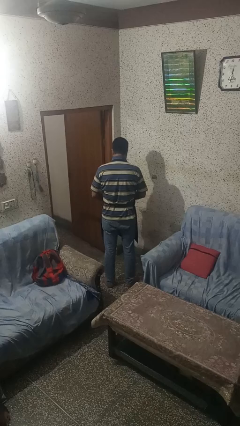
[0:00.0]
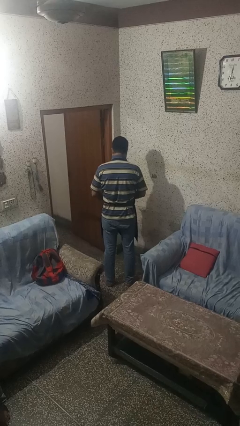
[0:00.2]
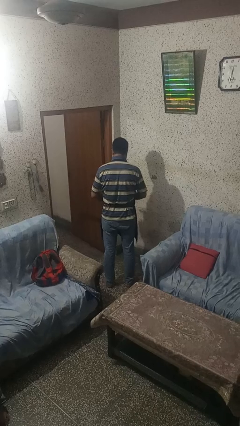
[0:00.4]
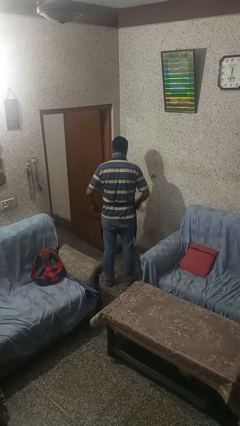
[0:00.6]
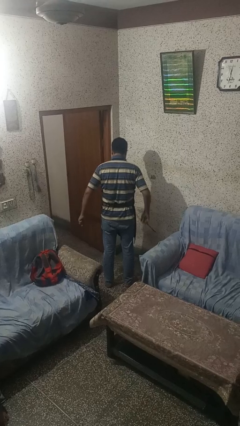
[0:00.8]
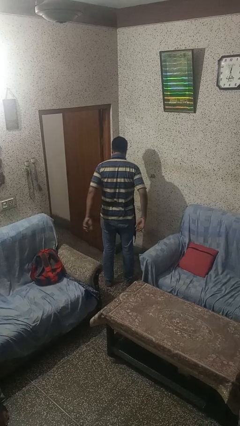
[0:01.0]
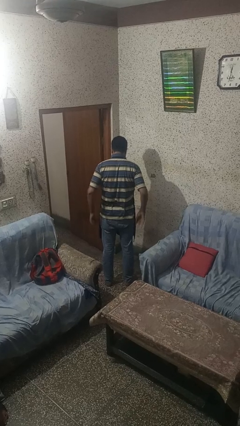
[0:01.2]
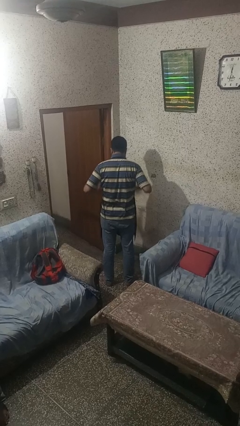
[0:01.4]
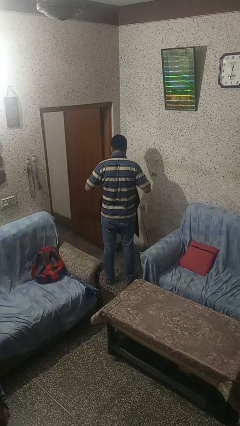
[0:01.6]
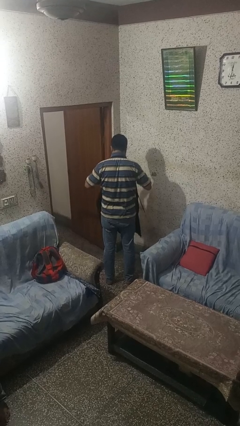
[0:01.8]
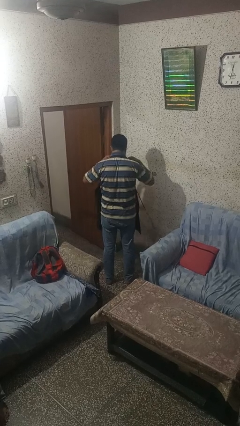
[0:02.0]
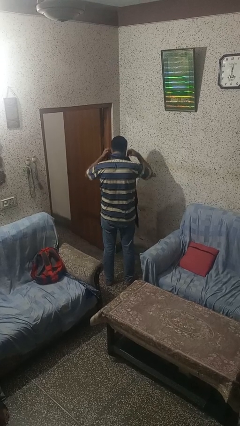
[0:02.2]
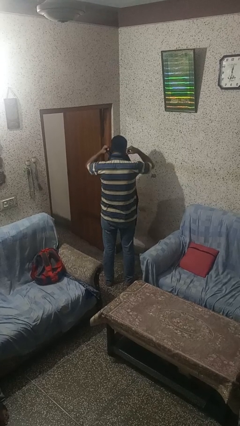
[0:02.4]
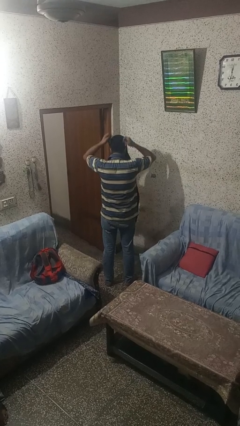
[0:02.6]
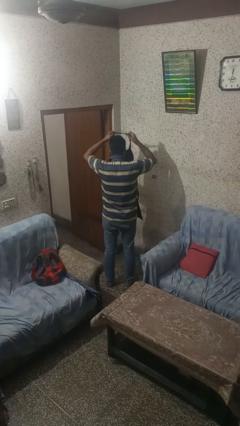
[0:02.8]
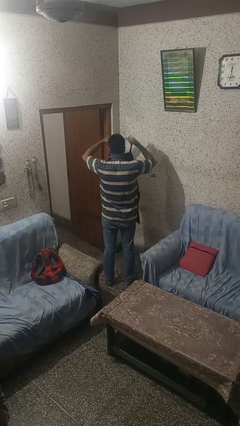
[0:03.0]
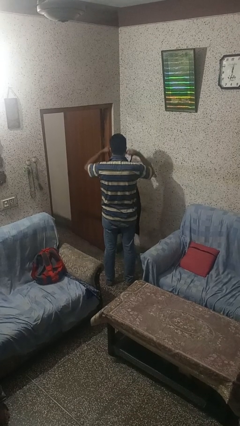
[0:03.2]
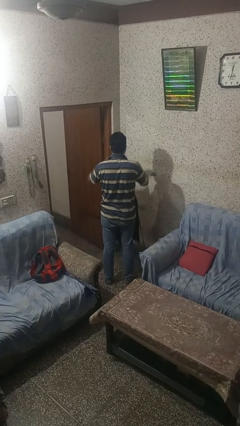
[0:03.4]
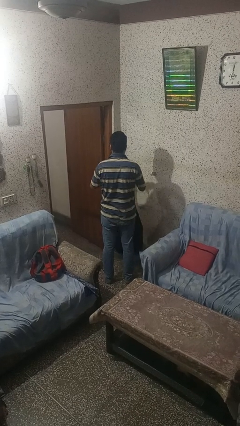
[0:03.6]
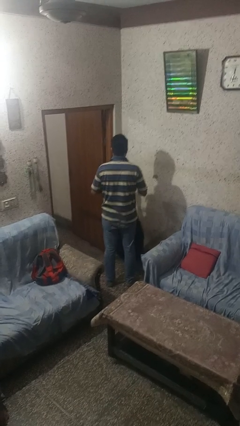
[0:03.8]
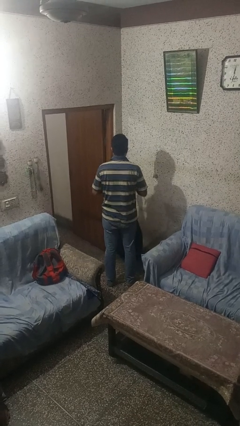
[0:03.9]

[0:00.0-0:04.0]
person takes off apron

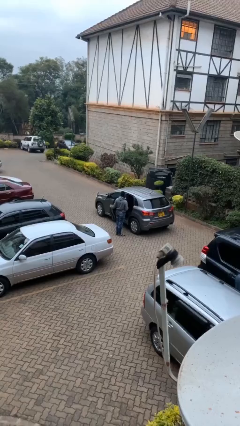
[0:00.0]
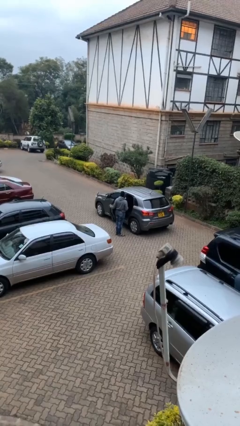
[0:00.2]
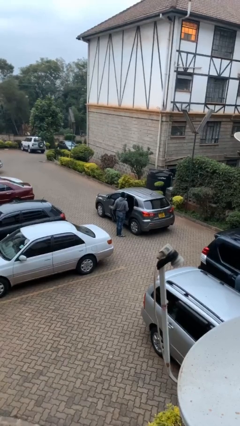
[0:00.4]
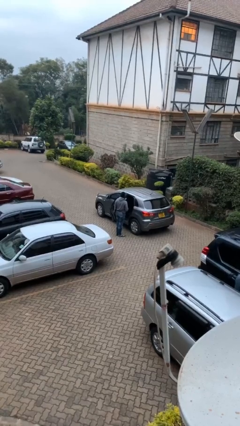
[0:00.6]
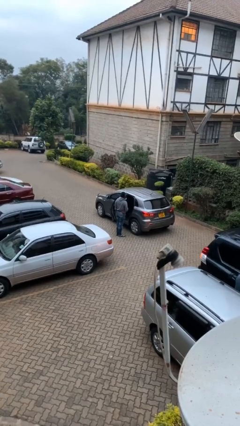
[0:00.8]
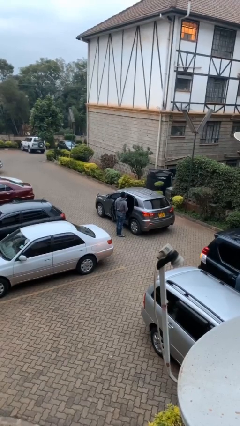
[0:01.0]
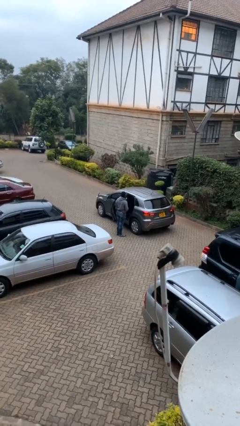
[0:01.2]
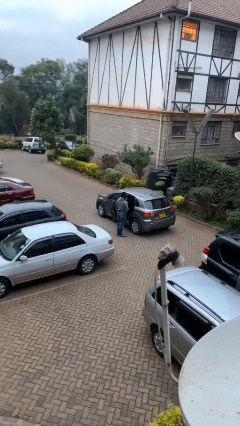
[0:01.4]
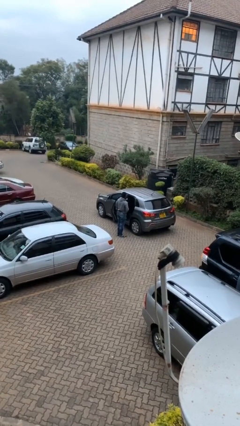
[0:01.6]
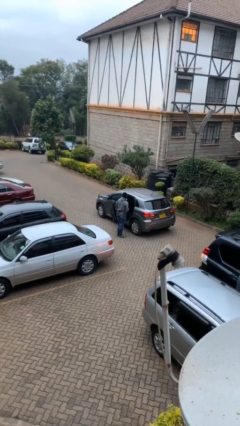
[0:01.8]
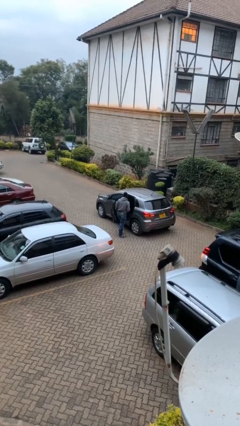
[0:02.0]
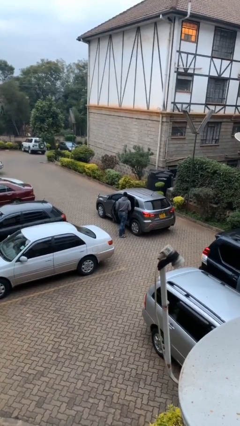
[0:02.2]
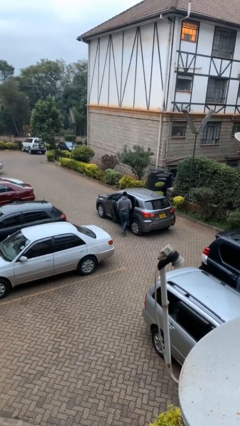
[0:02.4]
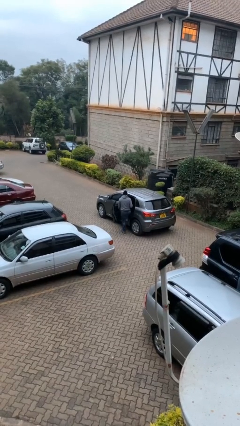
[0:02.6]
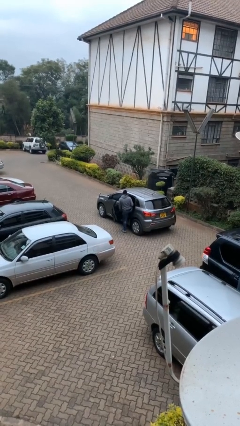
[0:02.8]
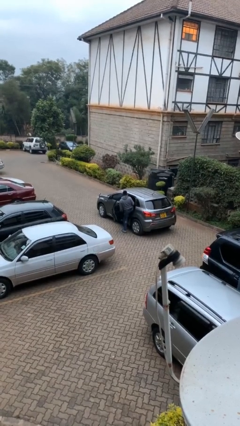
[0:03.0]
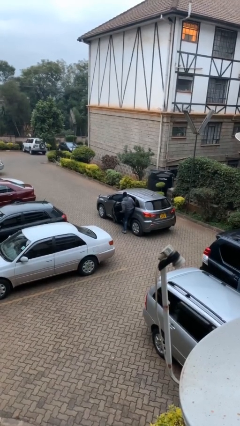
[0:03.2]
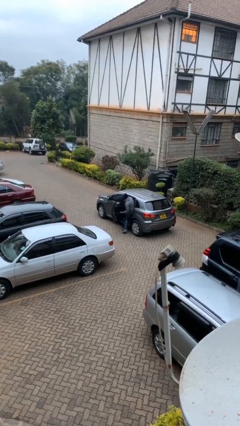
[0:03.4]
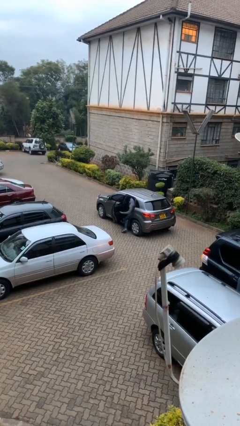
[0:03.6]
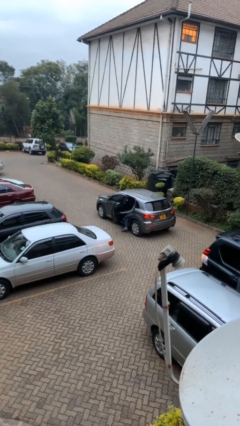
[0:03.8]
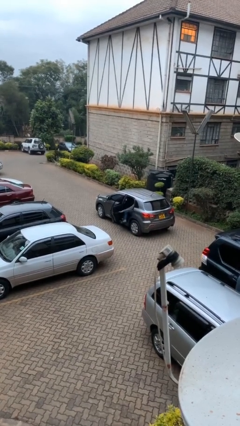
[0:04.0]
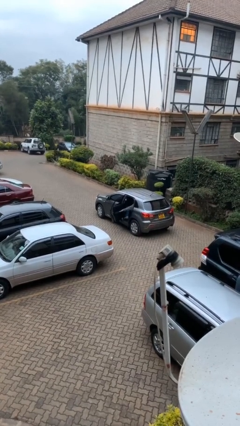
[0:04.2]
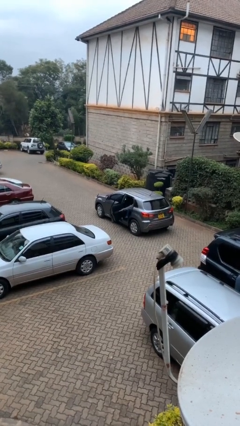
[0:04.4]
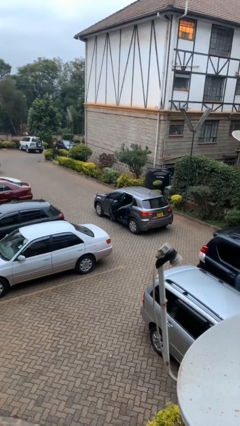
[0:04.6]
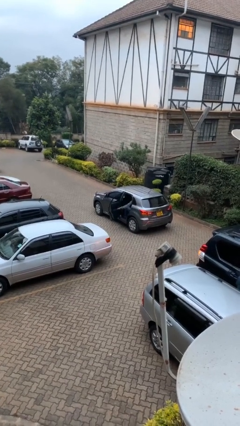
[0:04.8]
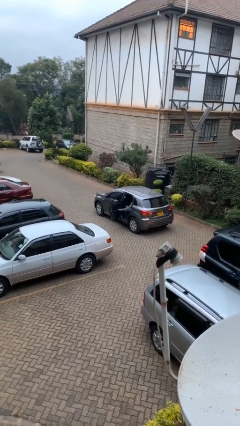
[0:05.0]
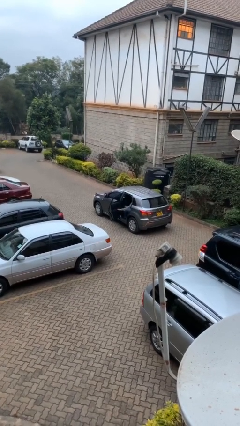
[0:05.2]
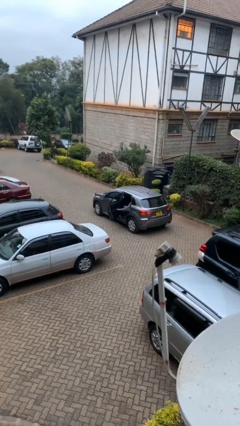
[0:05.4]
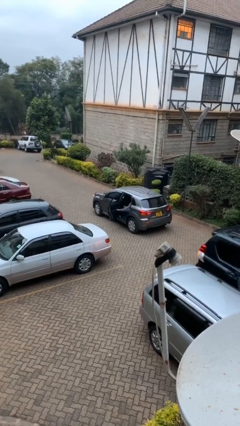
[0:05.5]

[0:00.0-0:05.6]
person enters car

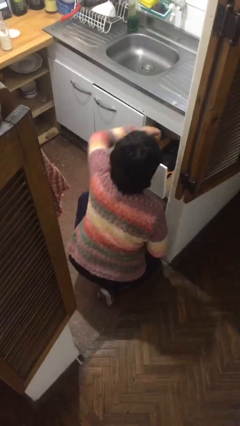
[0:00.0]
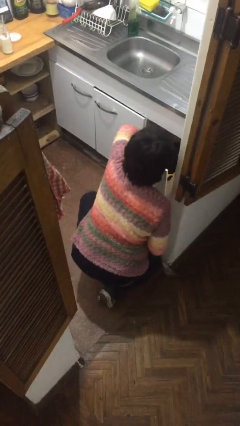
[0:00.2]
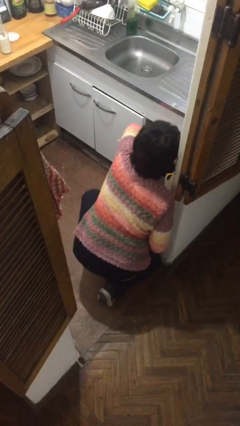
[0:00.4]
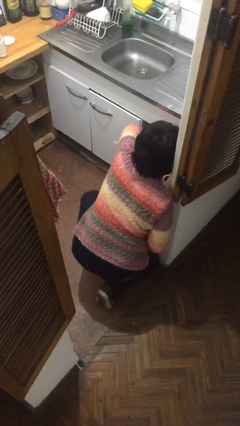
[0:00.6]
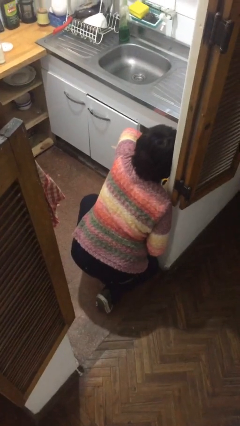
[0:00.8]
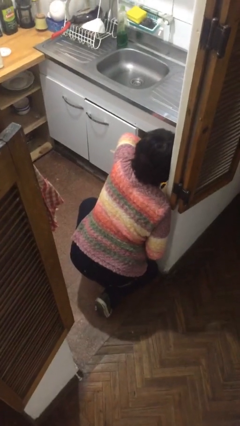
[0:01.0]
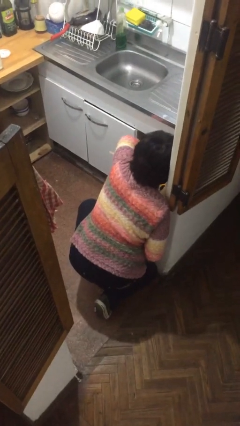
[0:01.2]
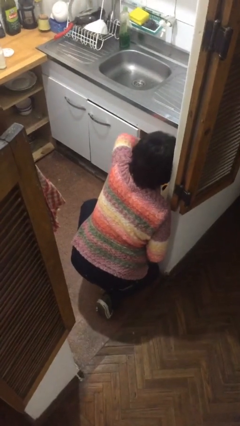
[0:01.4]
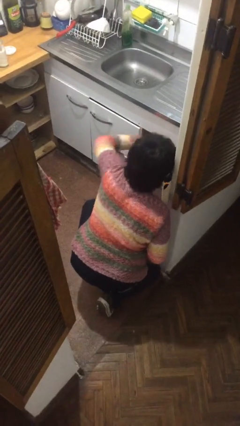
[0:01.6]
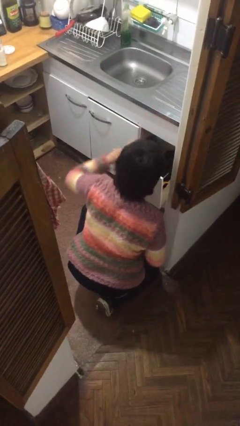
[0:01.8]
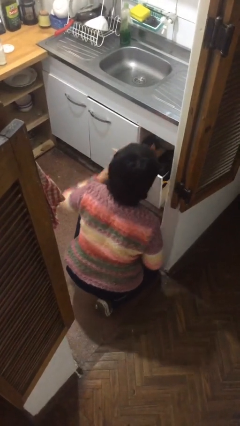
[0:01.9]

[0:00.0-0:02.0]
person searches in kitchen drawer

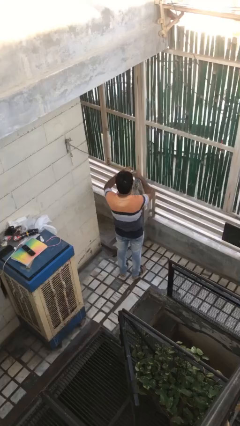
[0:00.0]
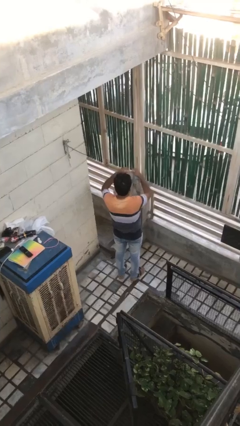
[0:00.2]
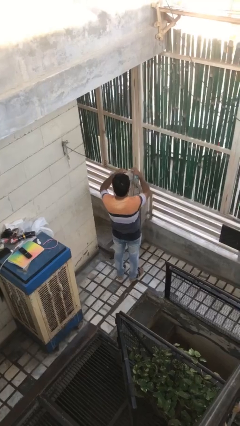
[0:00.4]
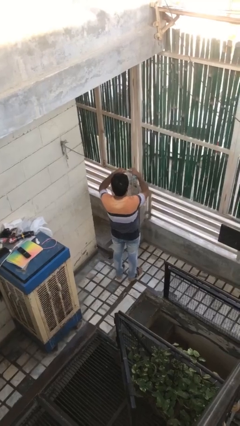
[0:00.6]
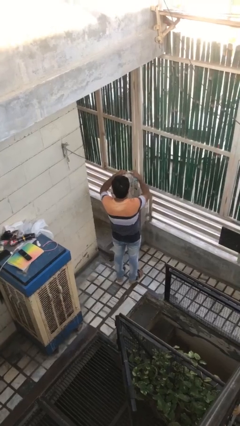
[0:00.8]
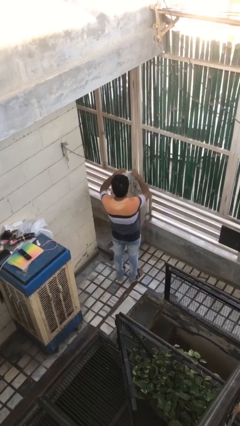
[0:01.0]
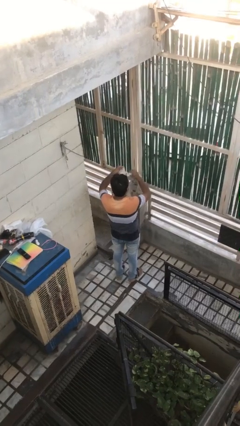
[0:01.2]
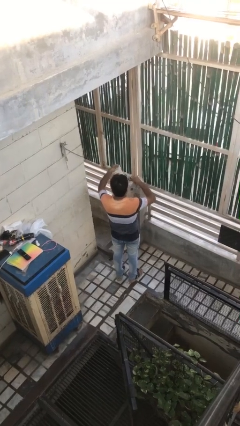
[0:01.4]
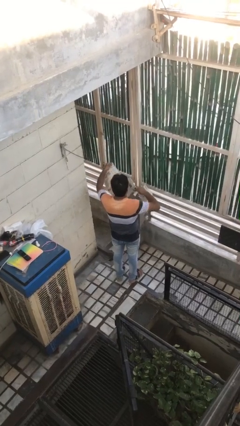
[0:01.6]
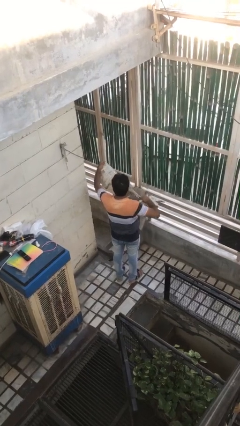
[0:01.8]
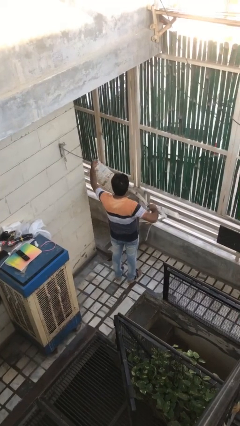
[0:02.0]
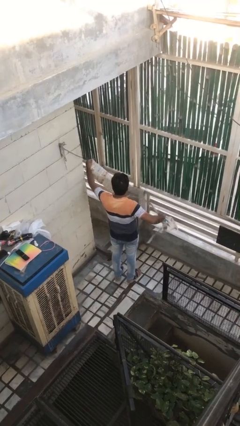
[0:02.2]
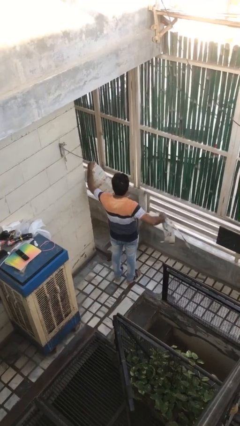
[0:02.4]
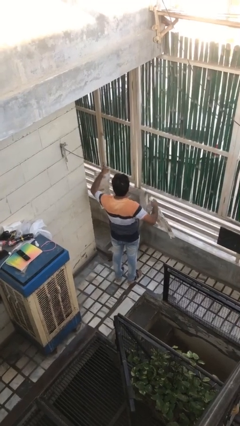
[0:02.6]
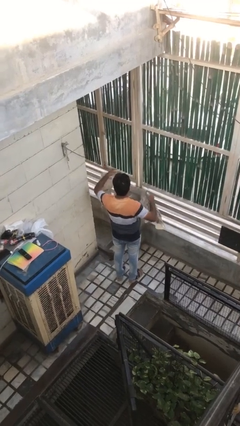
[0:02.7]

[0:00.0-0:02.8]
person tears paper

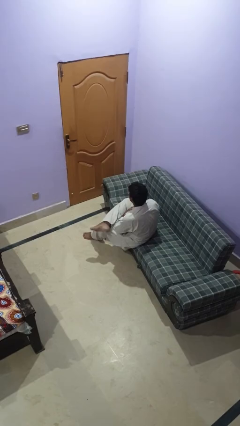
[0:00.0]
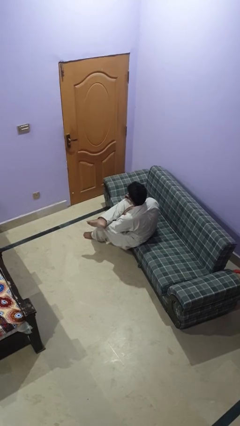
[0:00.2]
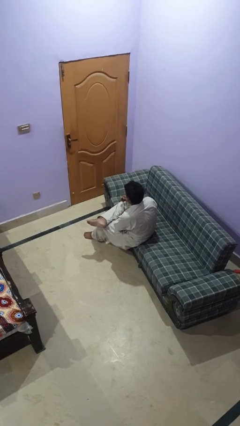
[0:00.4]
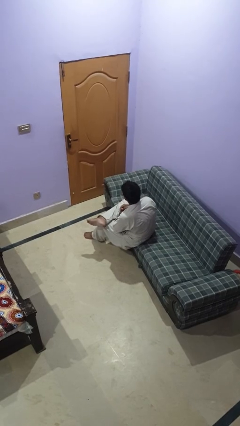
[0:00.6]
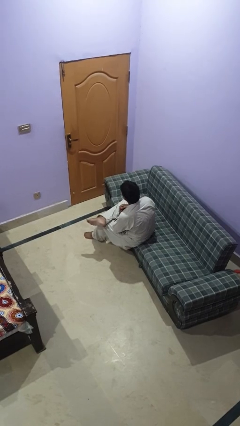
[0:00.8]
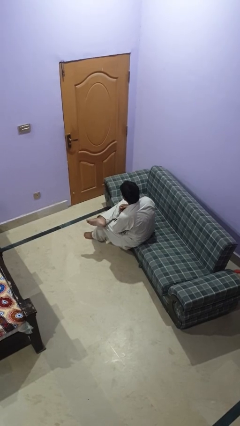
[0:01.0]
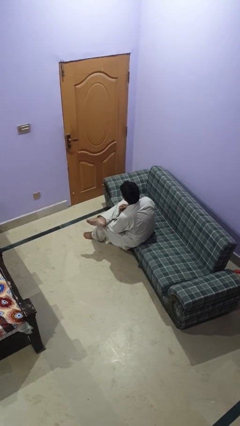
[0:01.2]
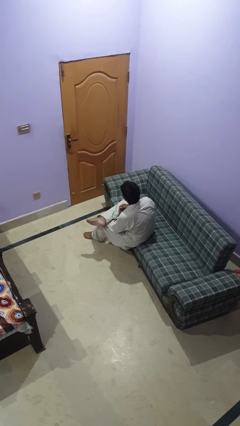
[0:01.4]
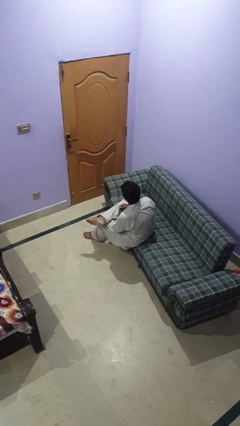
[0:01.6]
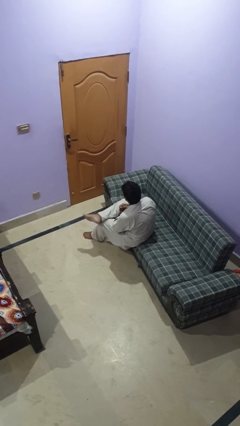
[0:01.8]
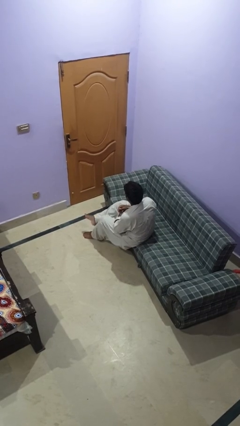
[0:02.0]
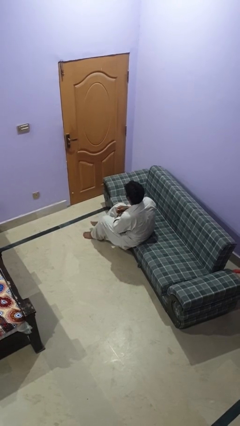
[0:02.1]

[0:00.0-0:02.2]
person crosses legs

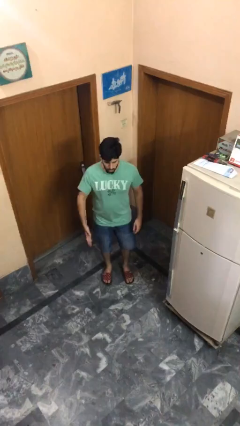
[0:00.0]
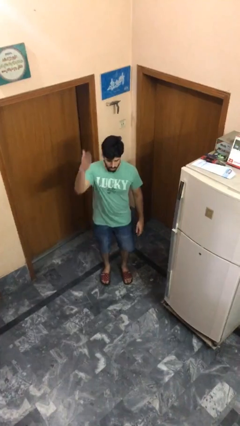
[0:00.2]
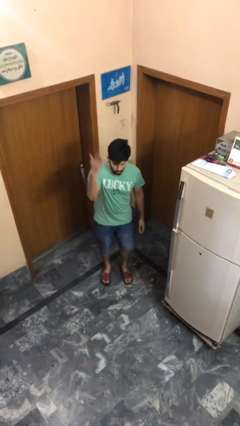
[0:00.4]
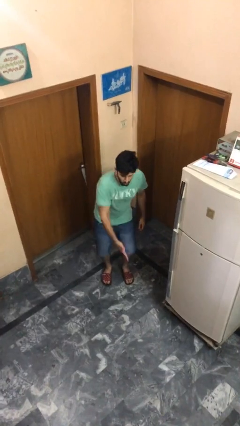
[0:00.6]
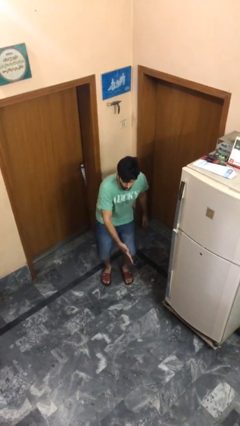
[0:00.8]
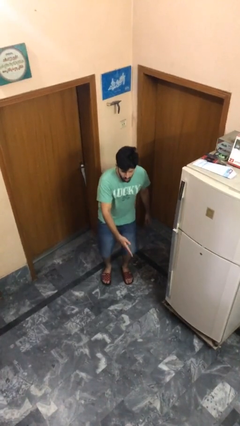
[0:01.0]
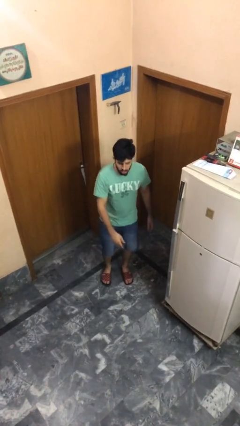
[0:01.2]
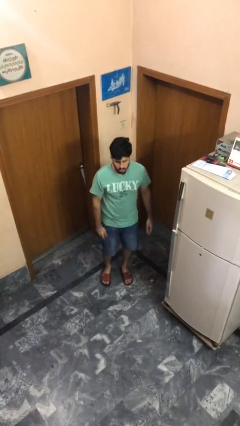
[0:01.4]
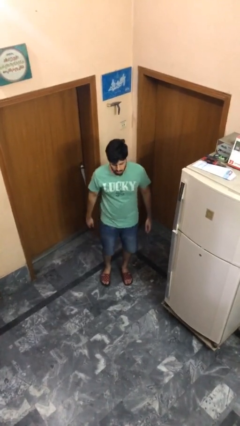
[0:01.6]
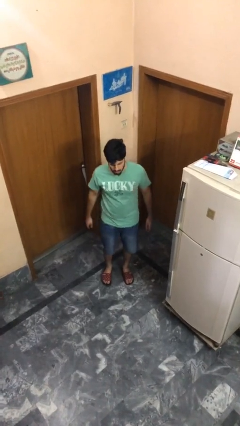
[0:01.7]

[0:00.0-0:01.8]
person karate chop
